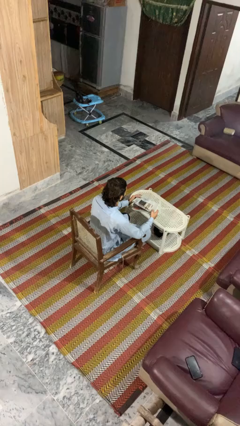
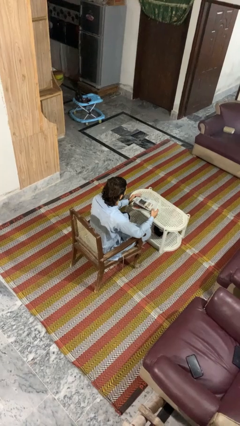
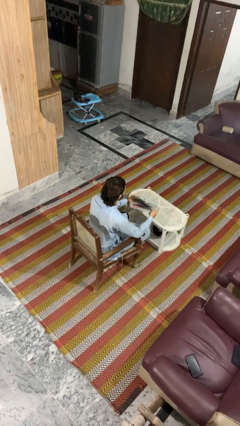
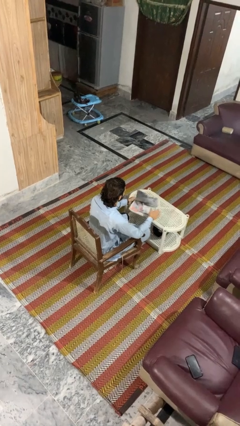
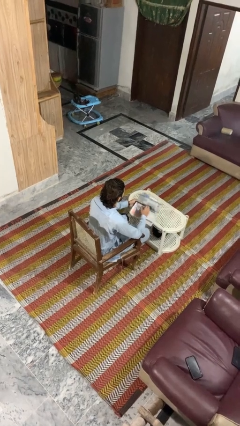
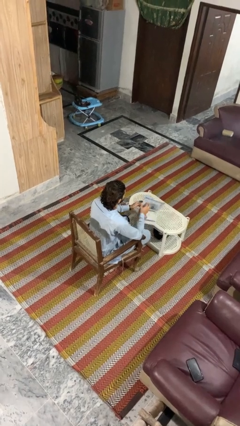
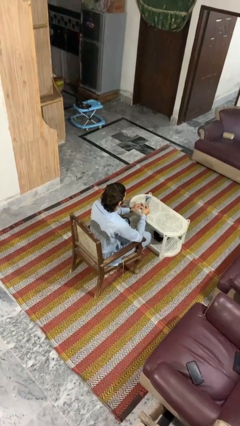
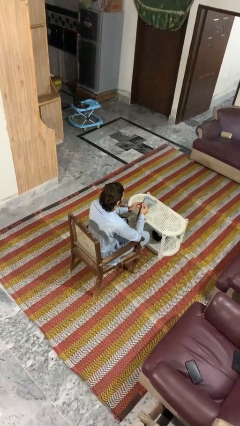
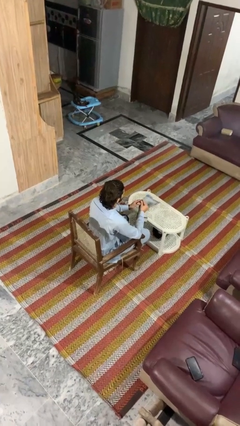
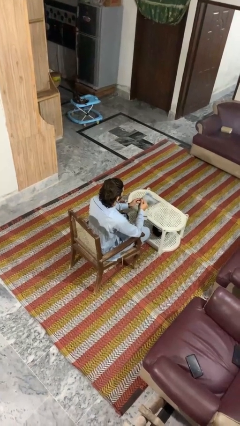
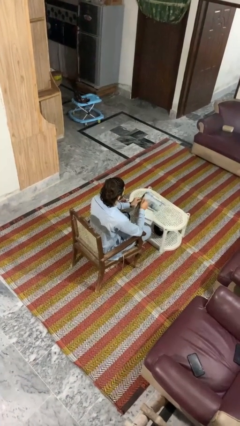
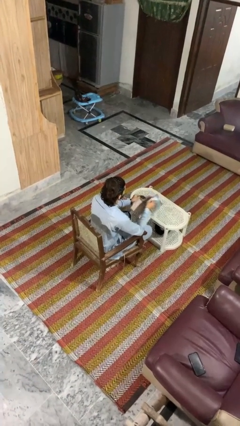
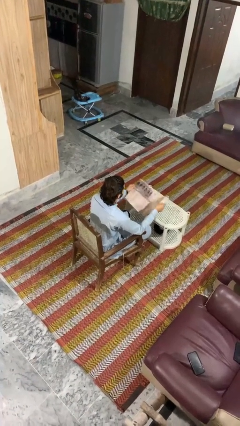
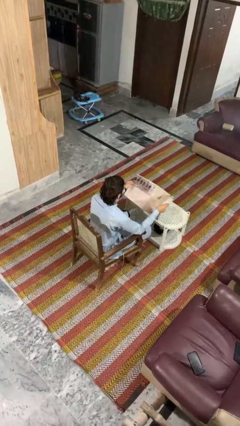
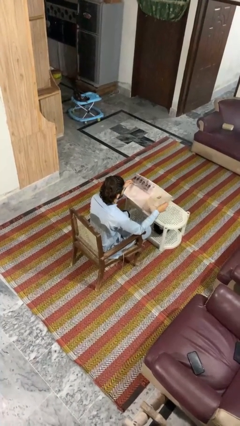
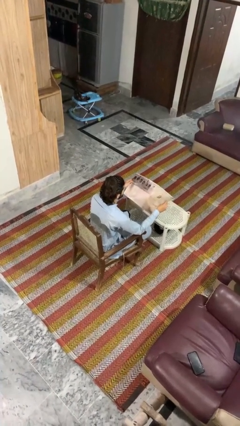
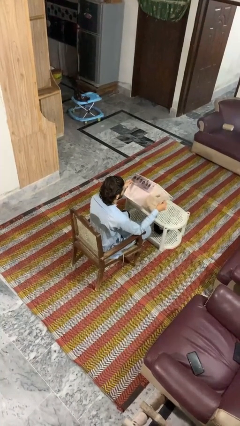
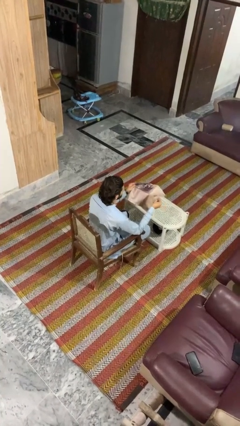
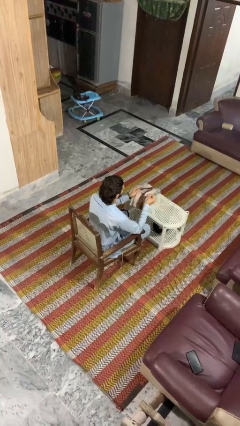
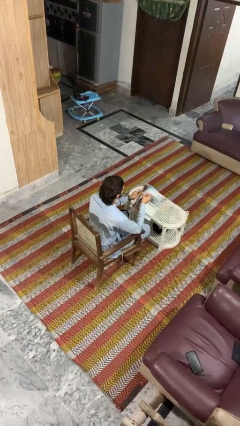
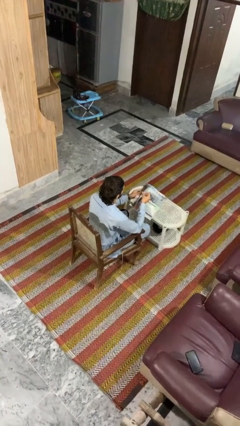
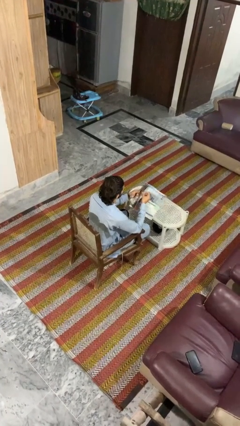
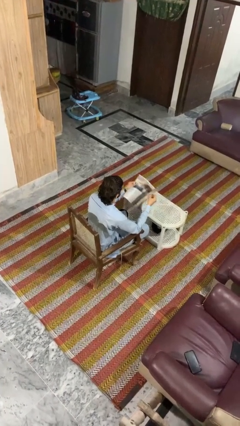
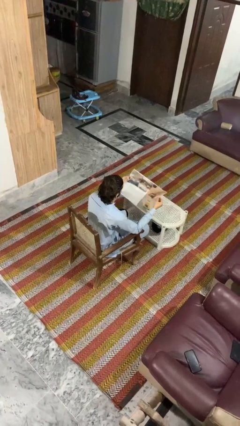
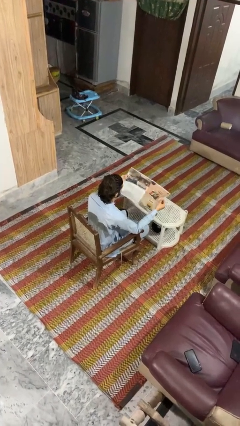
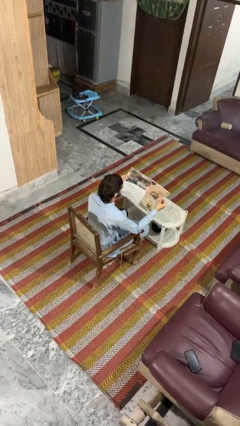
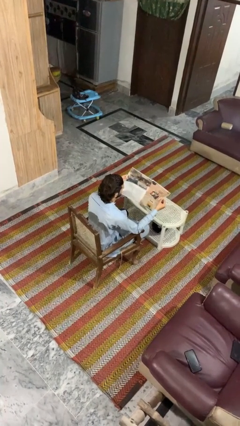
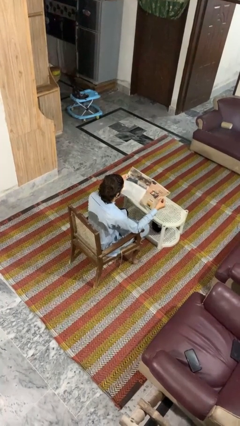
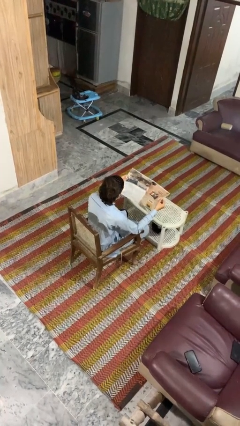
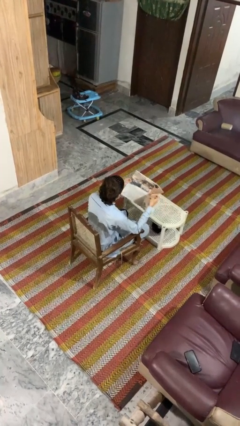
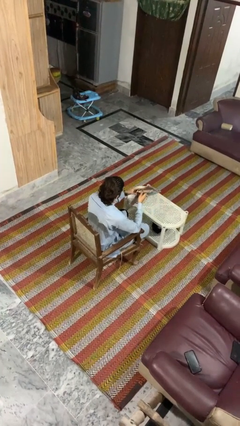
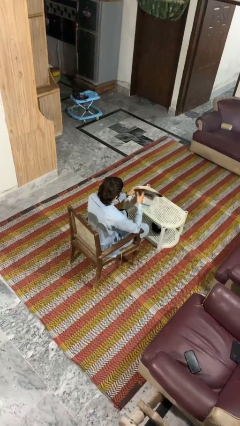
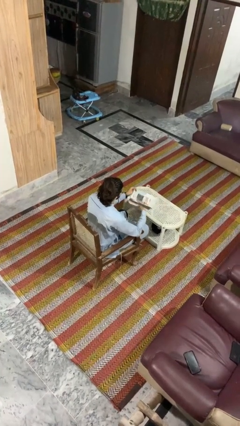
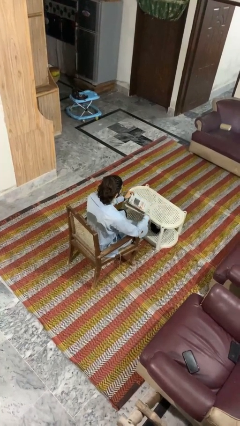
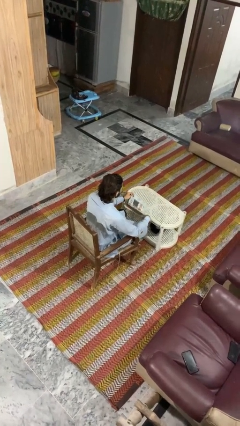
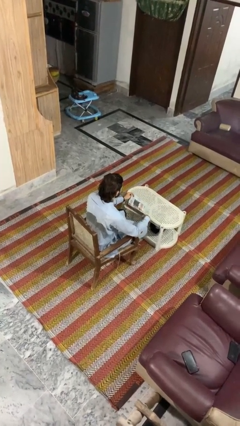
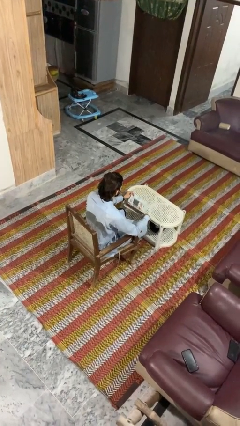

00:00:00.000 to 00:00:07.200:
person reads magazine

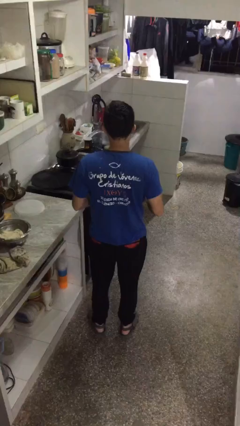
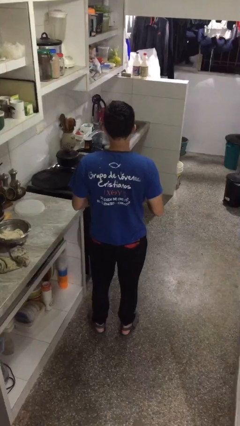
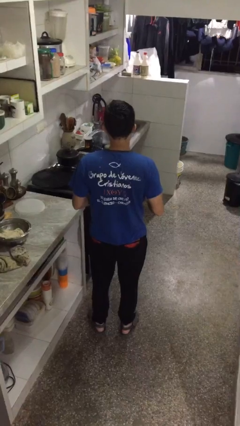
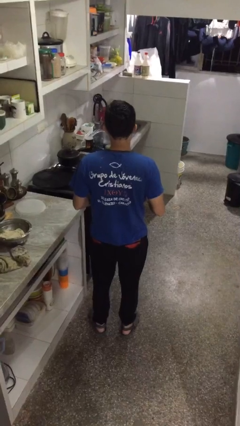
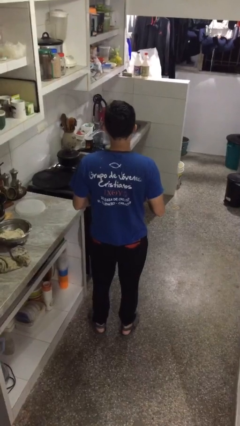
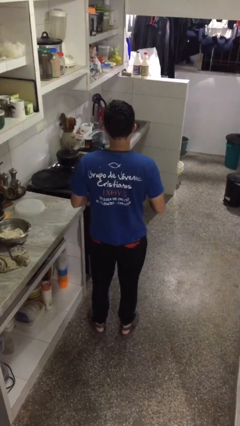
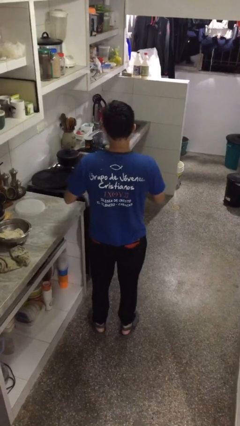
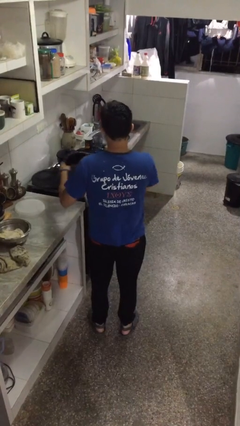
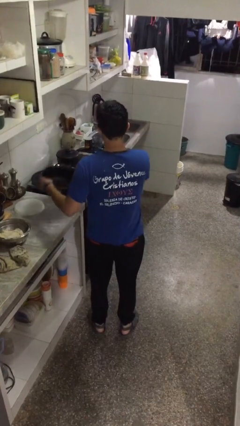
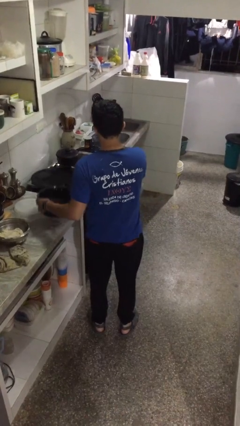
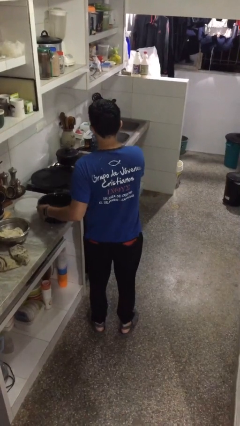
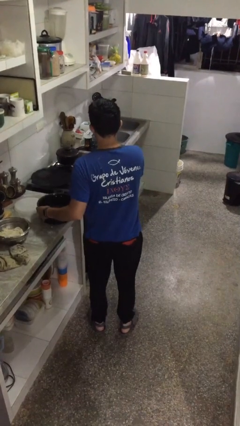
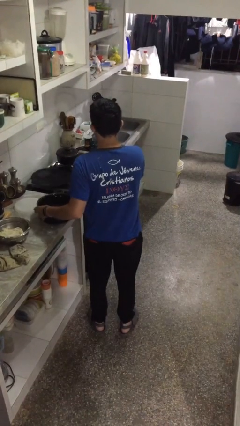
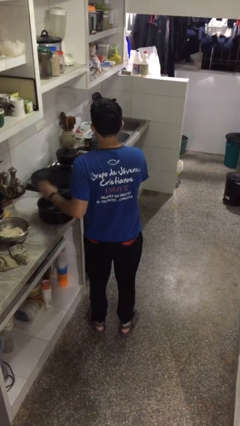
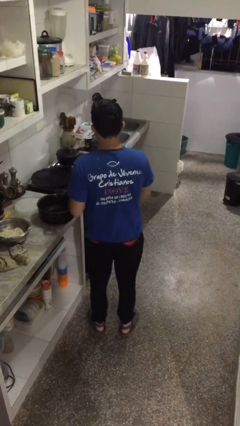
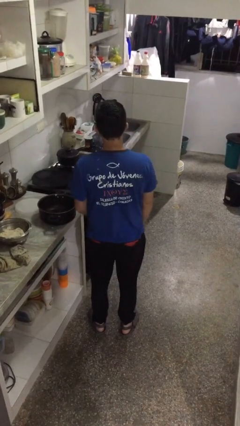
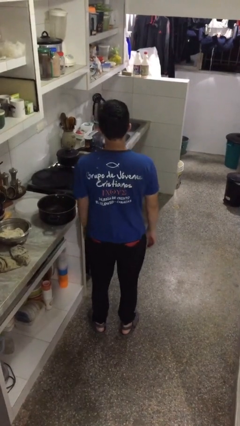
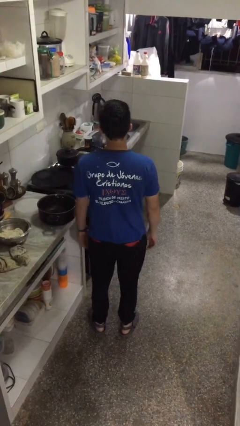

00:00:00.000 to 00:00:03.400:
person puts down object on countertop

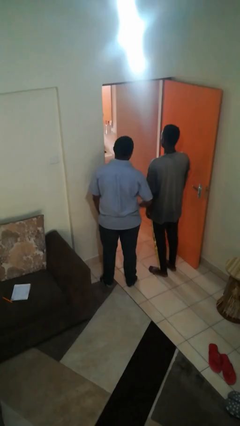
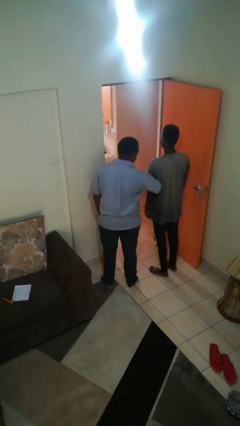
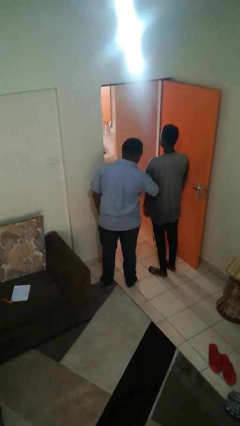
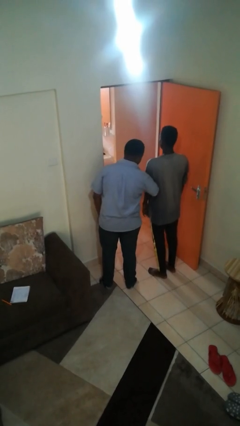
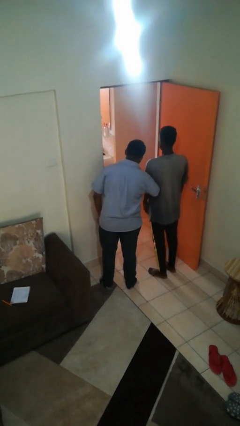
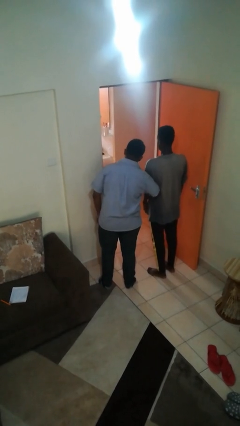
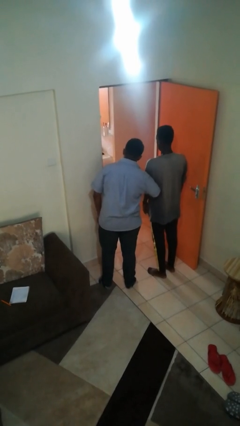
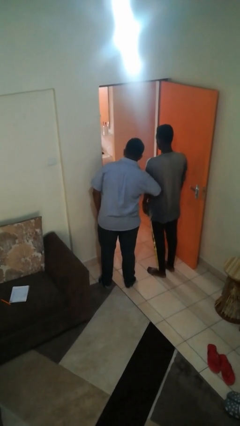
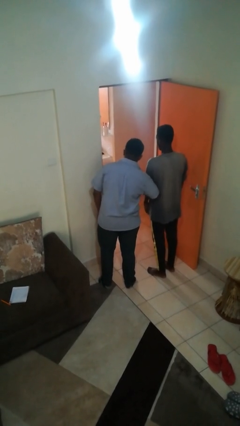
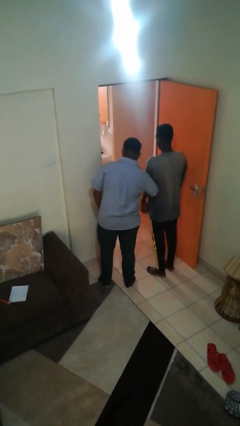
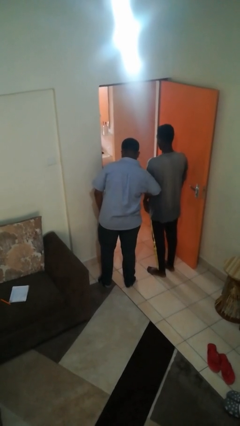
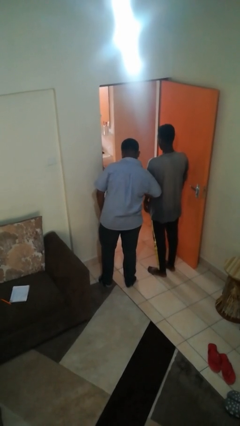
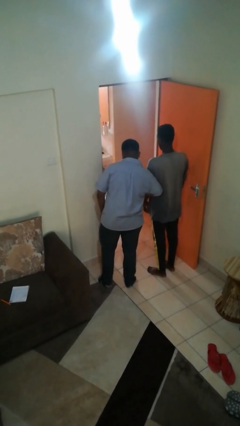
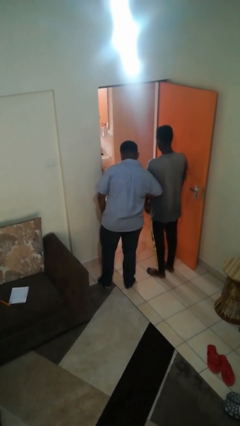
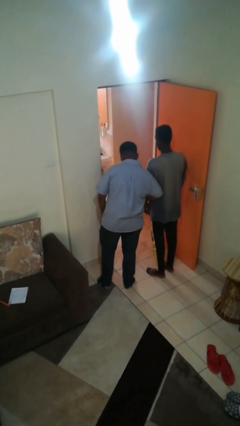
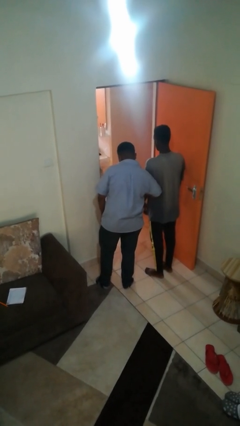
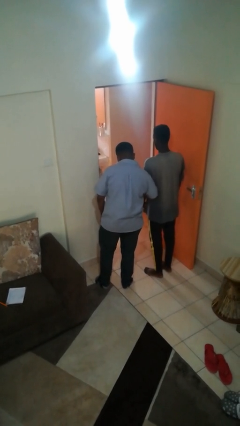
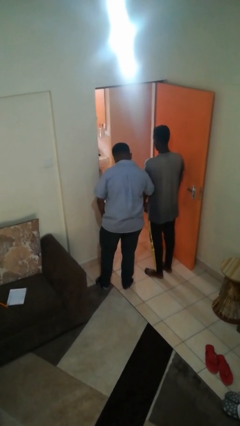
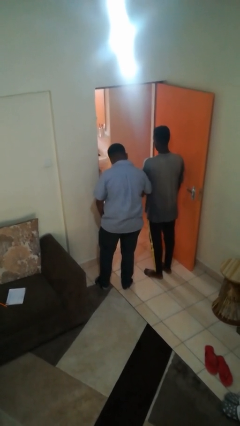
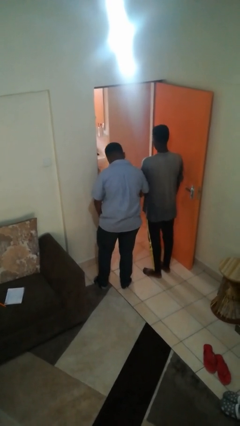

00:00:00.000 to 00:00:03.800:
person nudges person with elbow

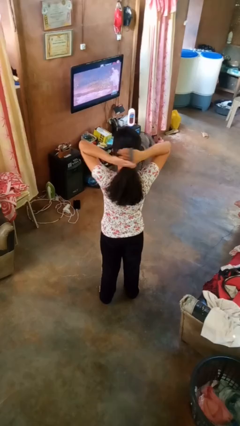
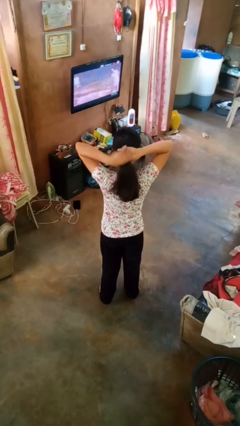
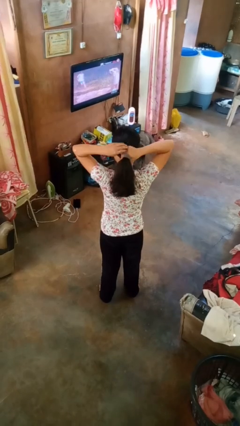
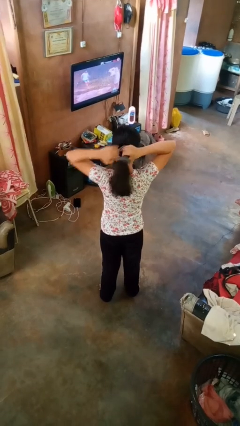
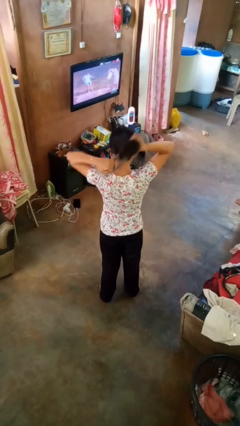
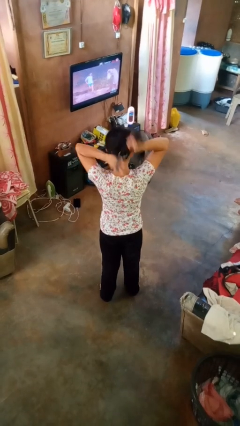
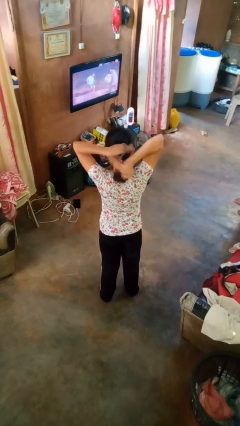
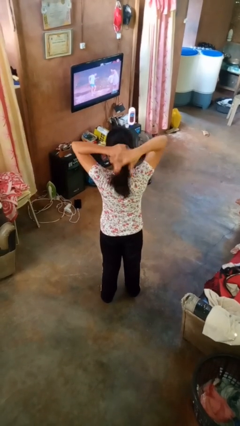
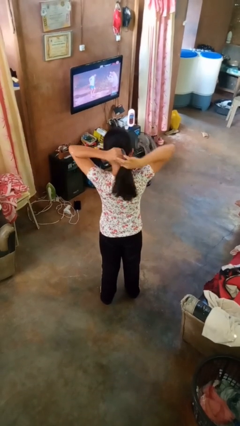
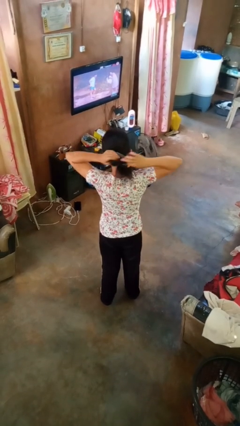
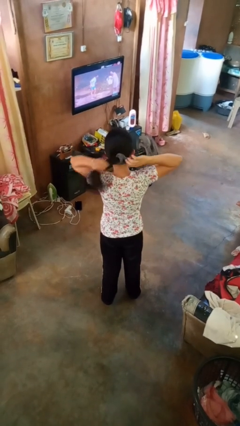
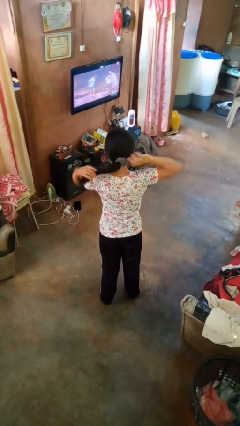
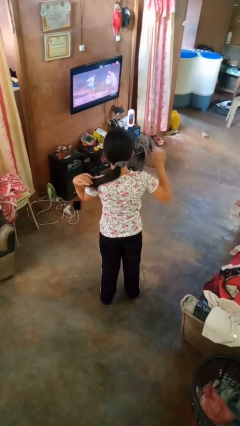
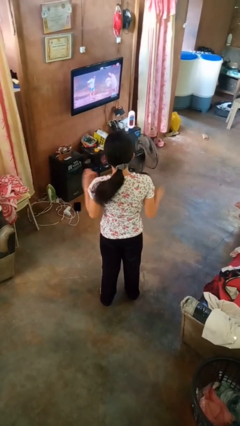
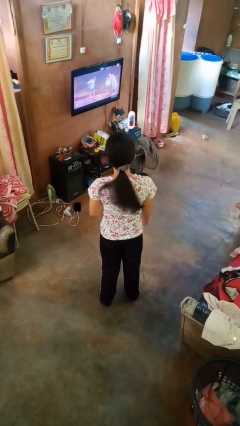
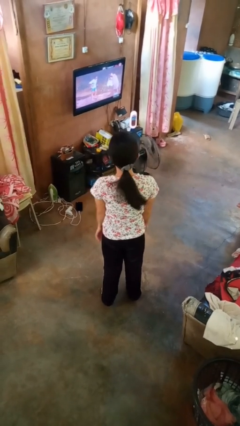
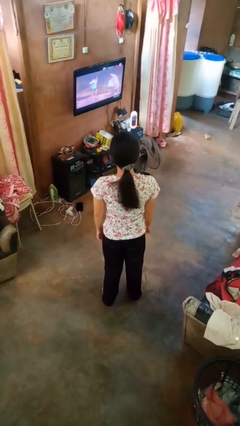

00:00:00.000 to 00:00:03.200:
person puts hair in ponytail
